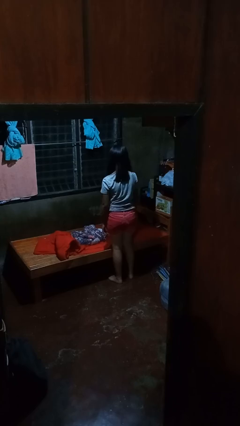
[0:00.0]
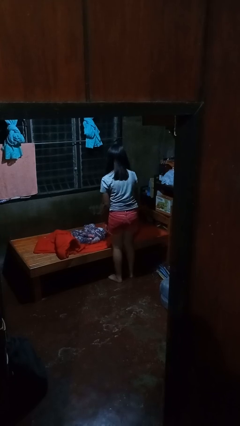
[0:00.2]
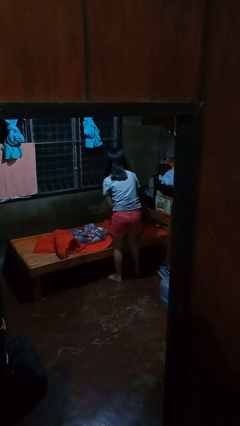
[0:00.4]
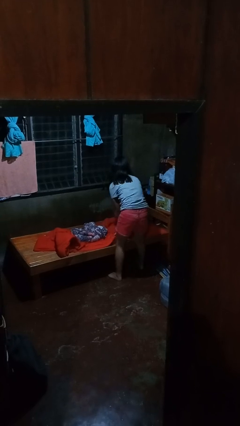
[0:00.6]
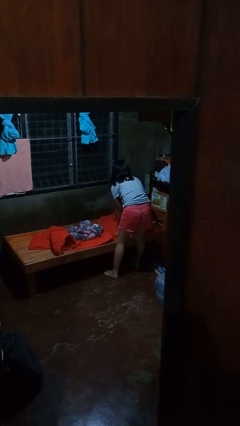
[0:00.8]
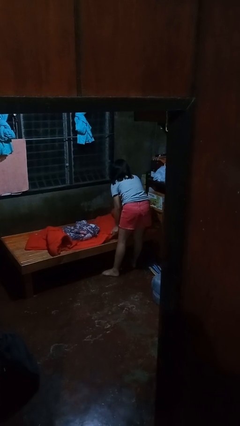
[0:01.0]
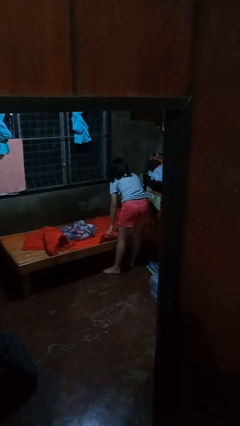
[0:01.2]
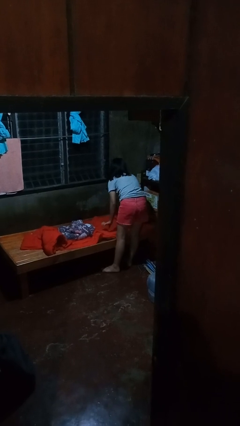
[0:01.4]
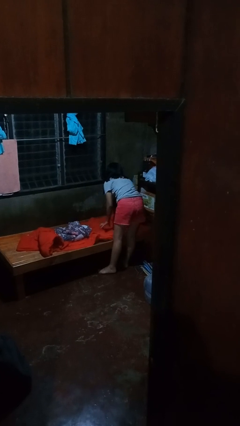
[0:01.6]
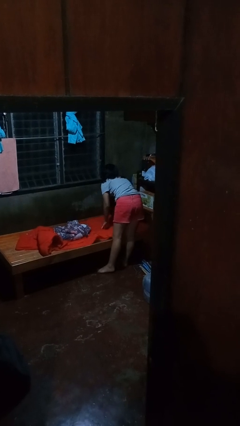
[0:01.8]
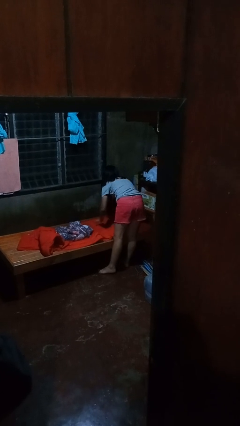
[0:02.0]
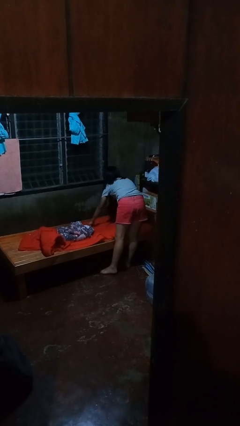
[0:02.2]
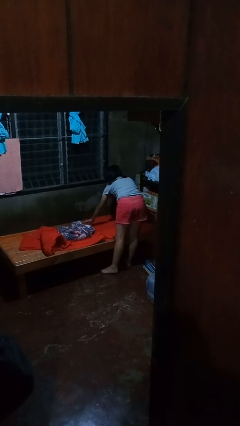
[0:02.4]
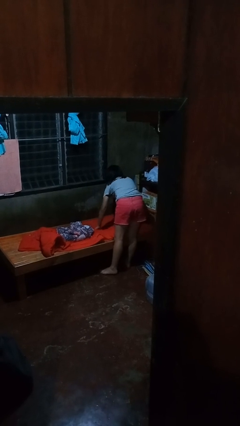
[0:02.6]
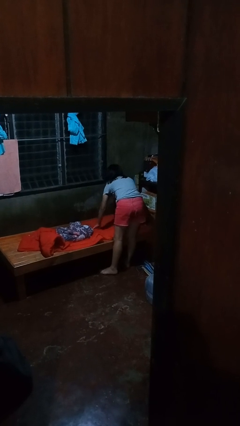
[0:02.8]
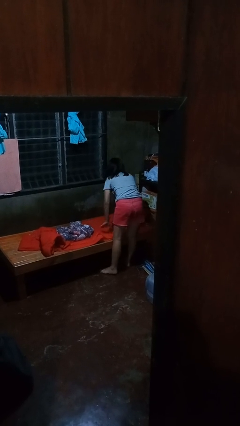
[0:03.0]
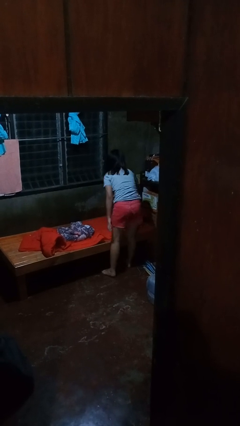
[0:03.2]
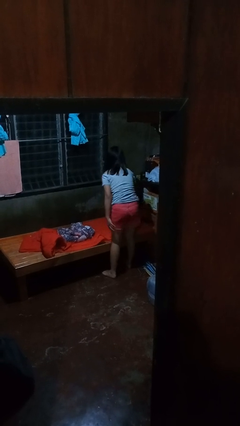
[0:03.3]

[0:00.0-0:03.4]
person makes bed

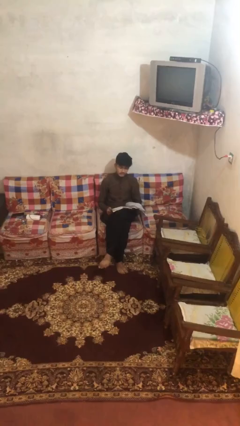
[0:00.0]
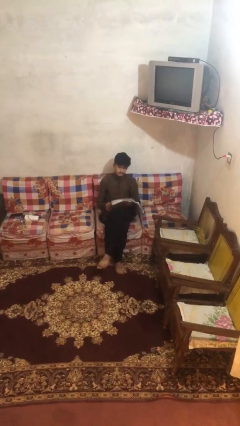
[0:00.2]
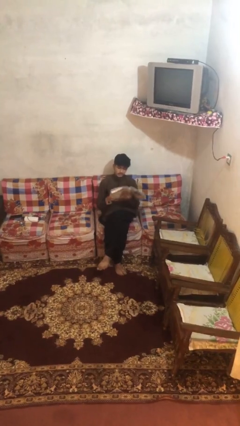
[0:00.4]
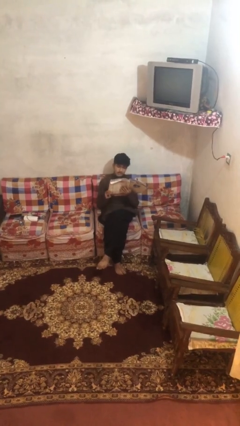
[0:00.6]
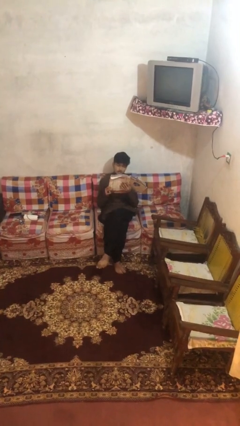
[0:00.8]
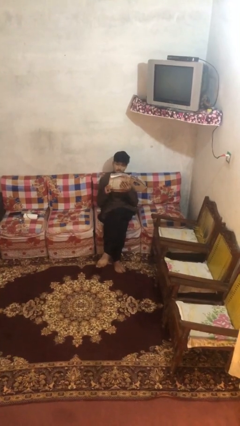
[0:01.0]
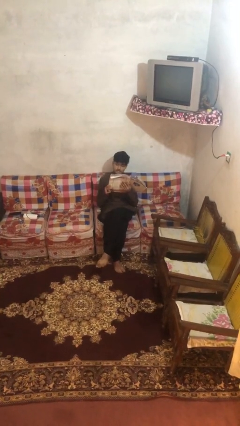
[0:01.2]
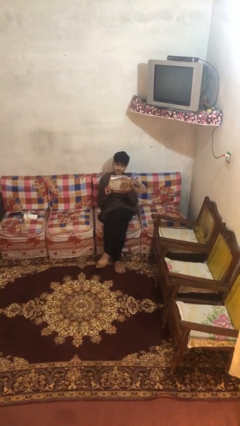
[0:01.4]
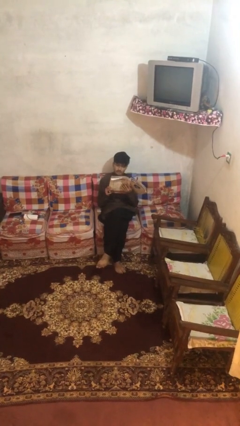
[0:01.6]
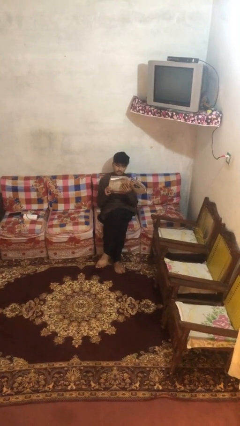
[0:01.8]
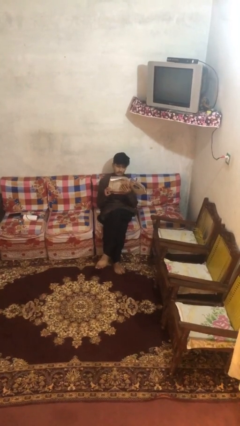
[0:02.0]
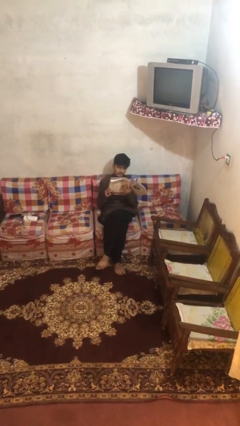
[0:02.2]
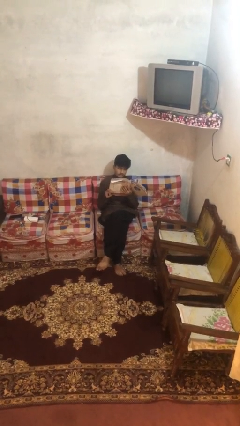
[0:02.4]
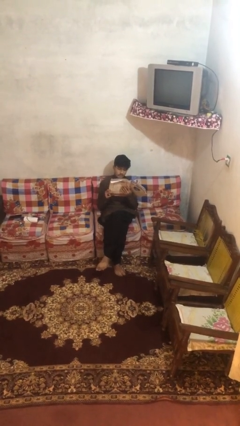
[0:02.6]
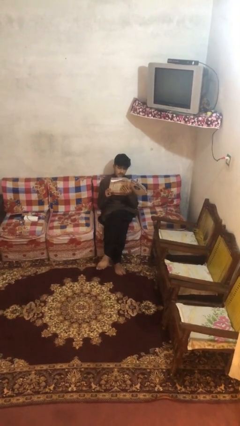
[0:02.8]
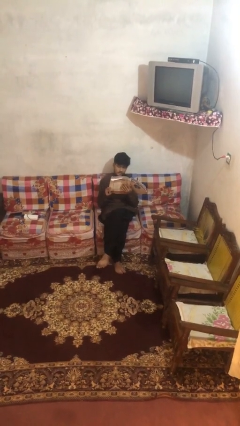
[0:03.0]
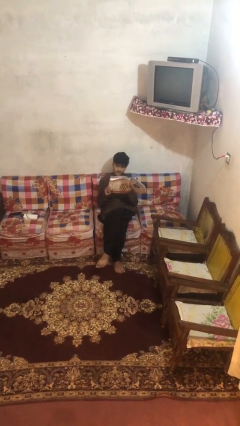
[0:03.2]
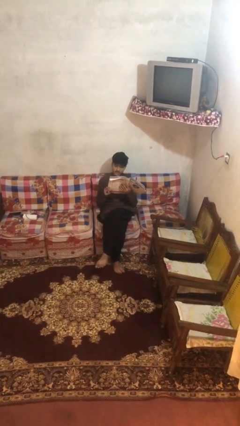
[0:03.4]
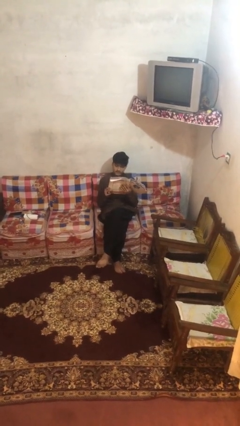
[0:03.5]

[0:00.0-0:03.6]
person reads document

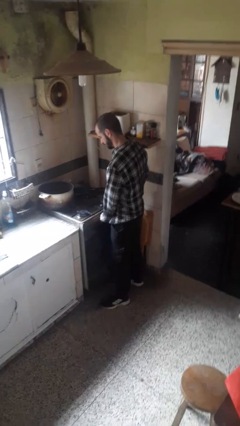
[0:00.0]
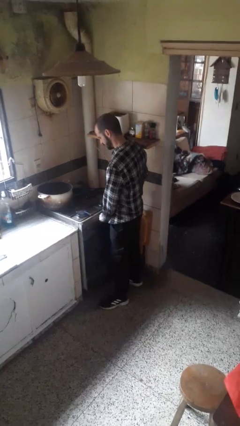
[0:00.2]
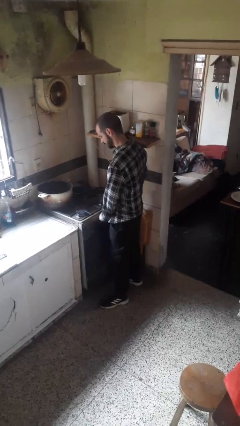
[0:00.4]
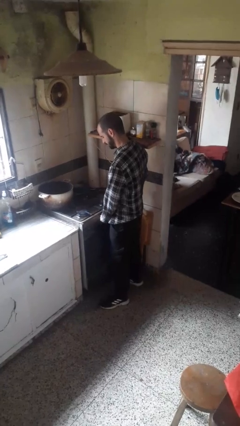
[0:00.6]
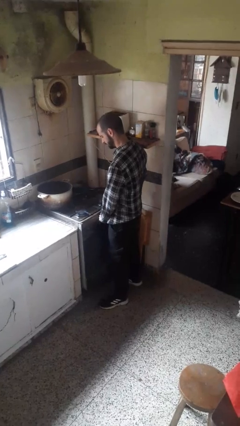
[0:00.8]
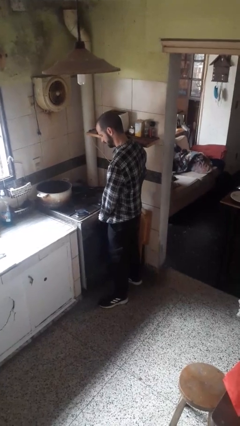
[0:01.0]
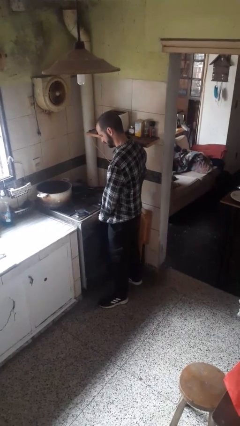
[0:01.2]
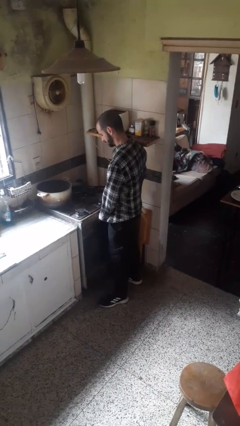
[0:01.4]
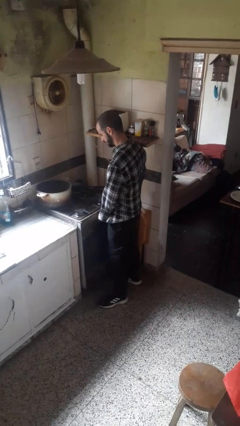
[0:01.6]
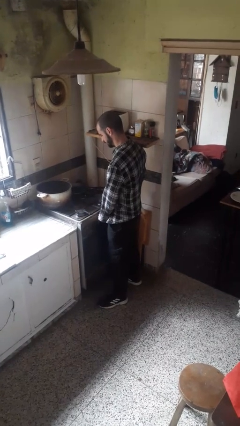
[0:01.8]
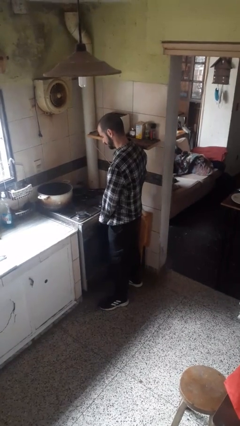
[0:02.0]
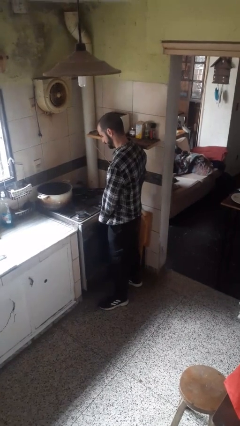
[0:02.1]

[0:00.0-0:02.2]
person turns off stovetop

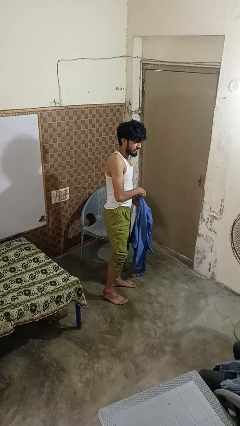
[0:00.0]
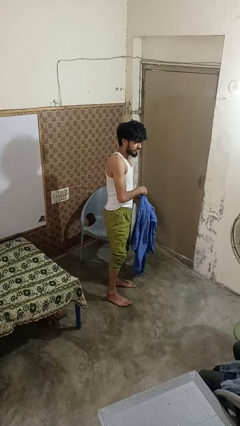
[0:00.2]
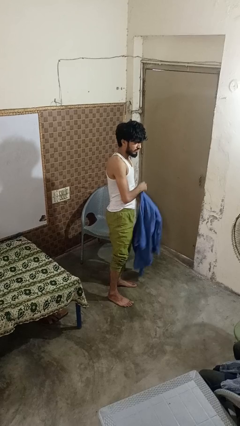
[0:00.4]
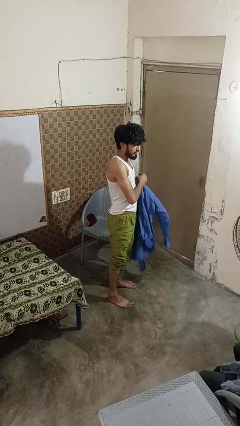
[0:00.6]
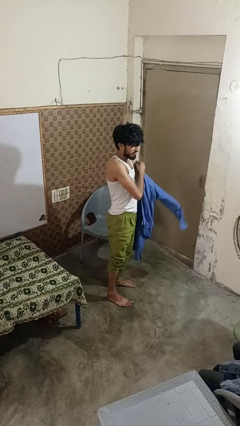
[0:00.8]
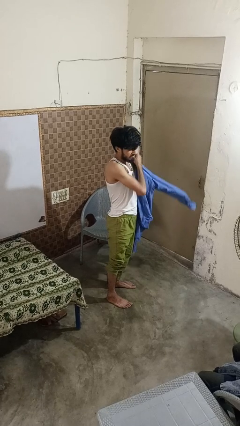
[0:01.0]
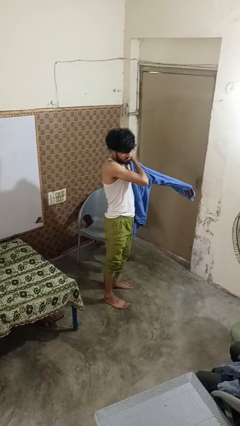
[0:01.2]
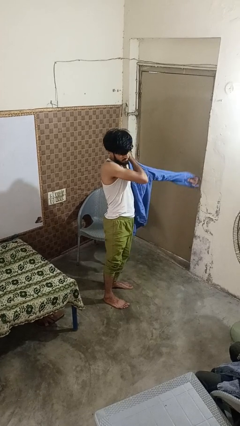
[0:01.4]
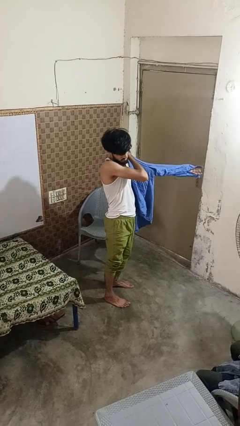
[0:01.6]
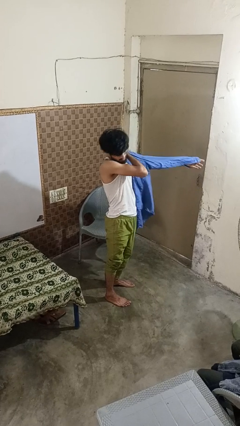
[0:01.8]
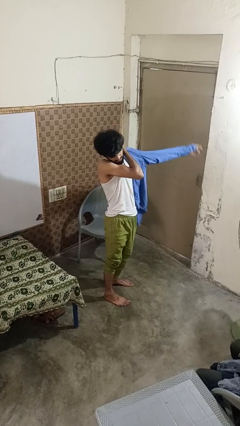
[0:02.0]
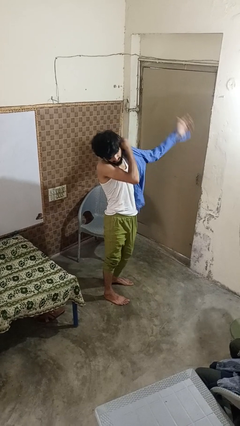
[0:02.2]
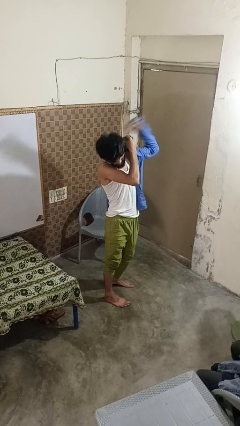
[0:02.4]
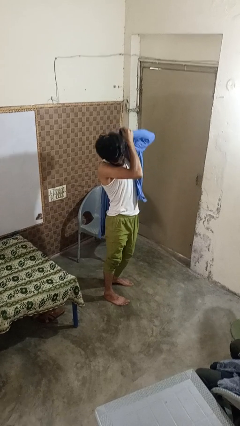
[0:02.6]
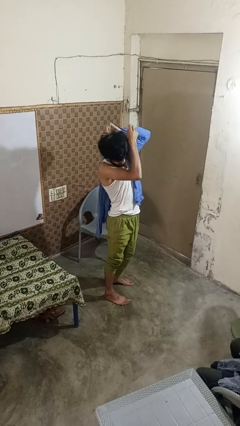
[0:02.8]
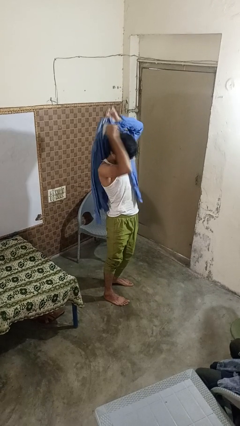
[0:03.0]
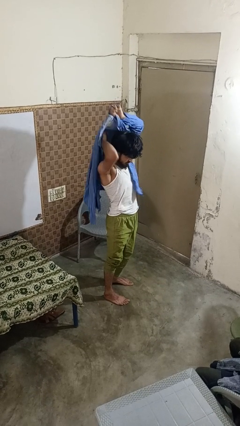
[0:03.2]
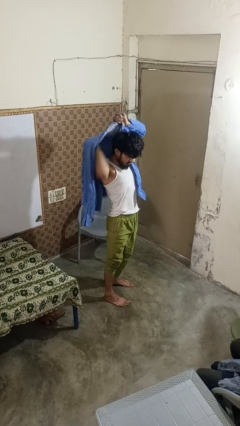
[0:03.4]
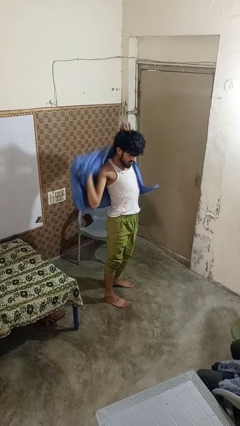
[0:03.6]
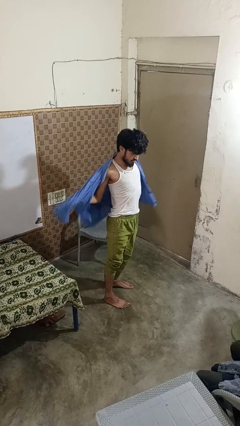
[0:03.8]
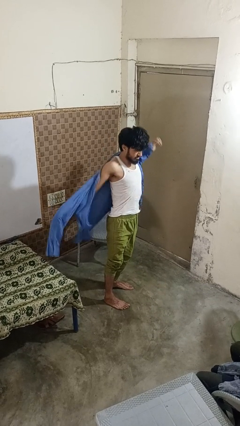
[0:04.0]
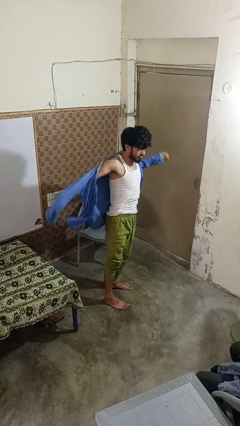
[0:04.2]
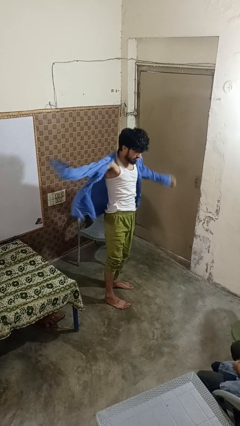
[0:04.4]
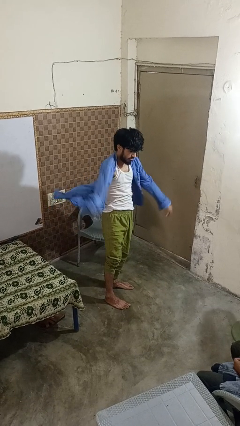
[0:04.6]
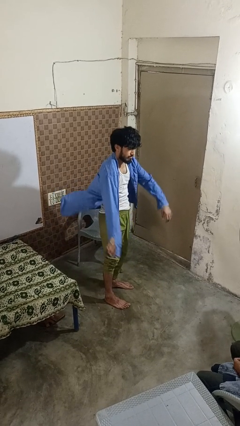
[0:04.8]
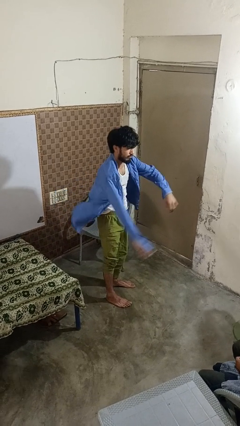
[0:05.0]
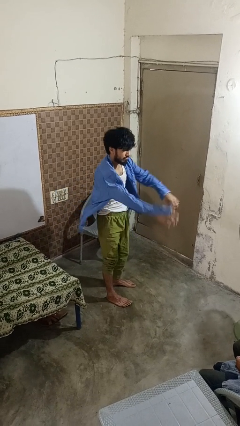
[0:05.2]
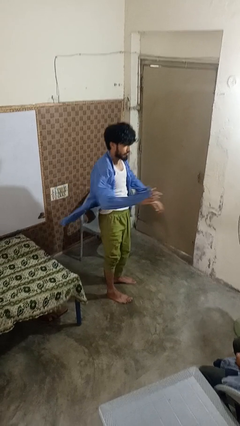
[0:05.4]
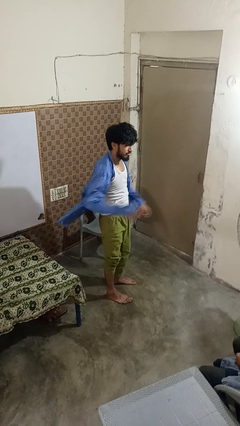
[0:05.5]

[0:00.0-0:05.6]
person puts on shirt

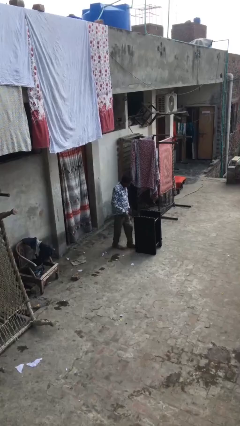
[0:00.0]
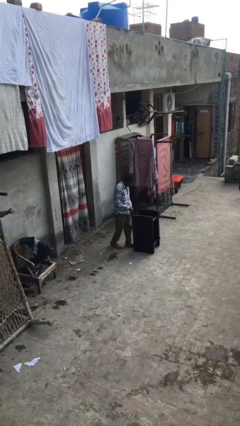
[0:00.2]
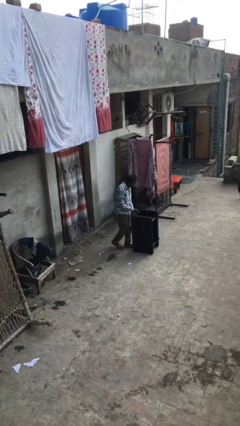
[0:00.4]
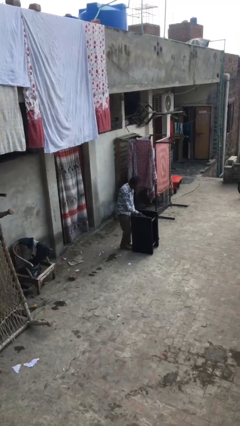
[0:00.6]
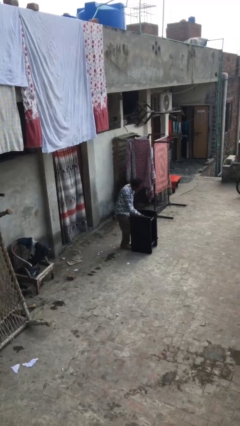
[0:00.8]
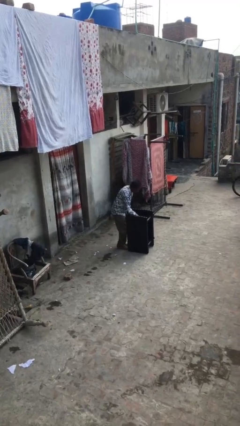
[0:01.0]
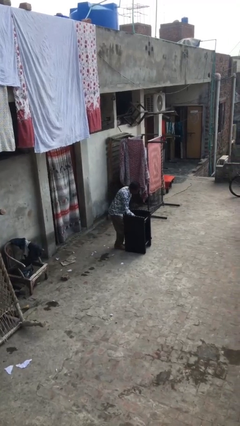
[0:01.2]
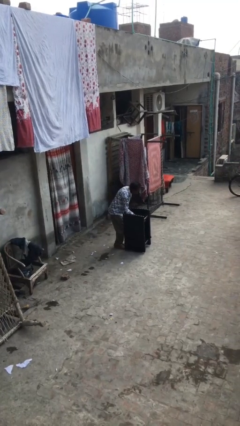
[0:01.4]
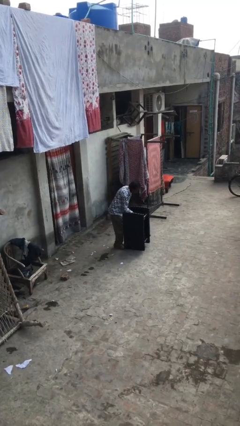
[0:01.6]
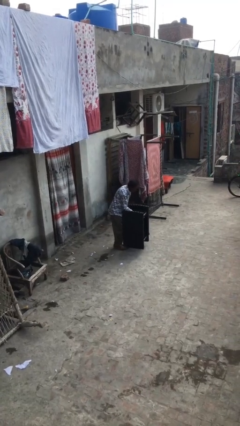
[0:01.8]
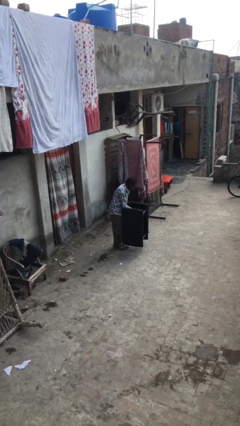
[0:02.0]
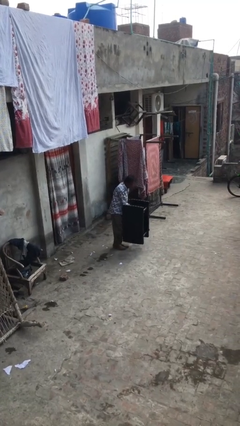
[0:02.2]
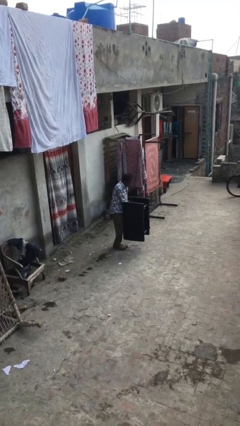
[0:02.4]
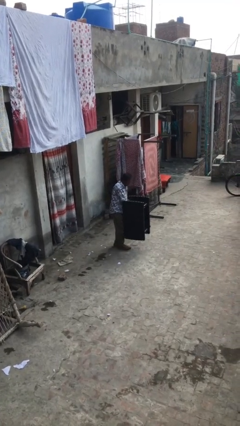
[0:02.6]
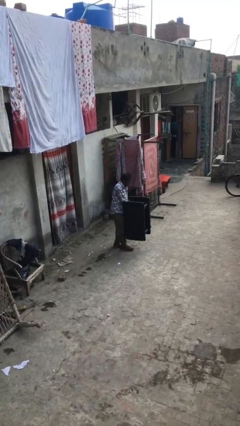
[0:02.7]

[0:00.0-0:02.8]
person picks up object from floor
